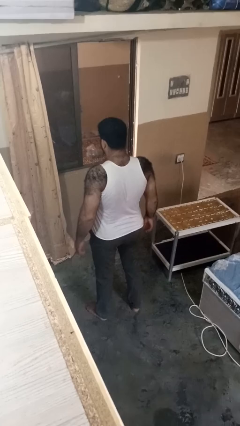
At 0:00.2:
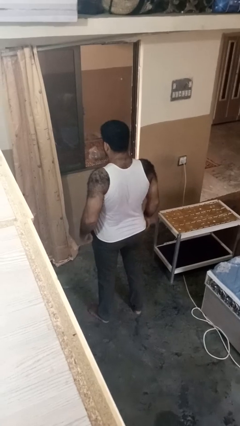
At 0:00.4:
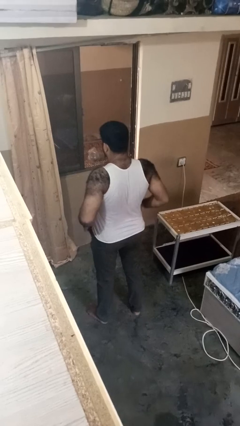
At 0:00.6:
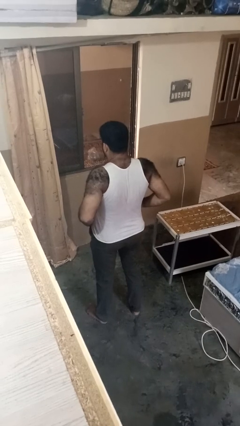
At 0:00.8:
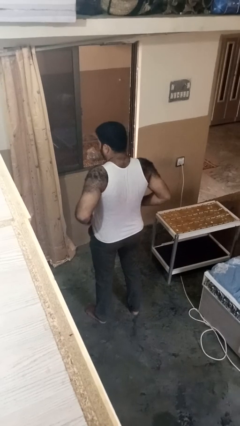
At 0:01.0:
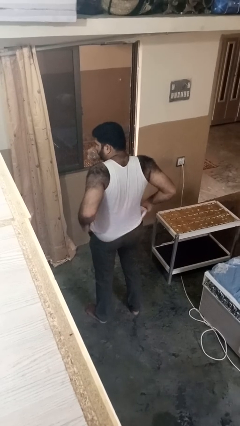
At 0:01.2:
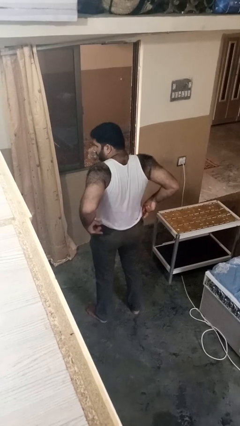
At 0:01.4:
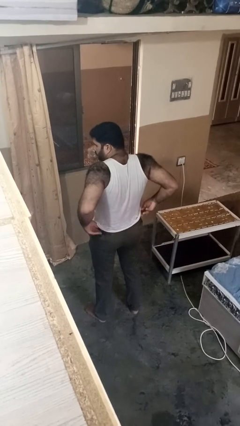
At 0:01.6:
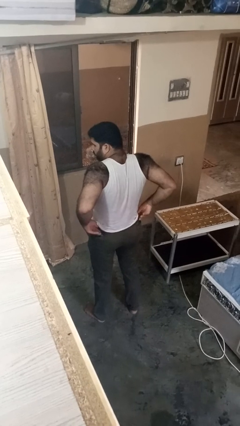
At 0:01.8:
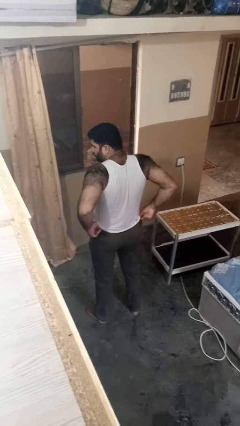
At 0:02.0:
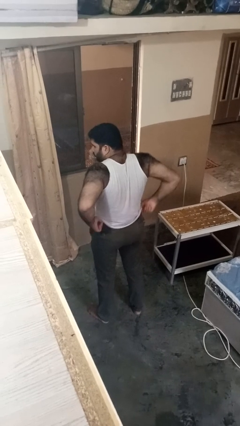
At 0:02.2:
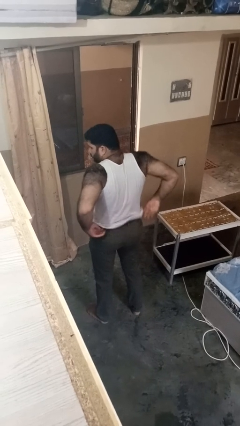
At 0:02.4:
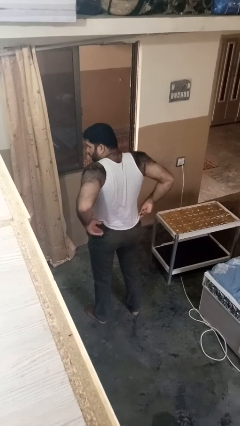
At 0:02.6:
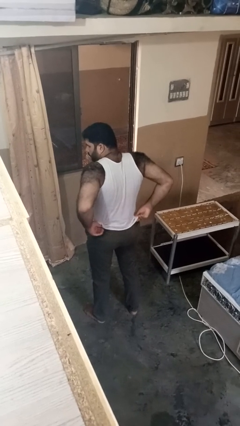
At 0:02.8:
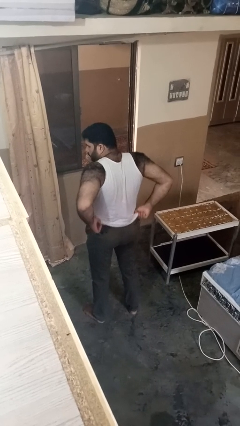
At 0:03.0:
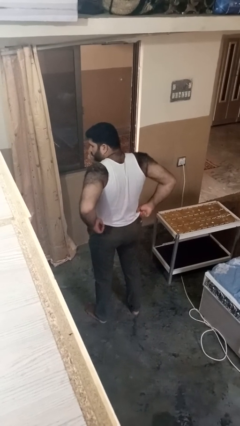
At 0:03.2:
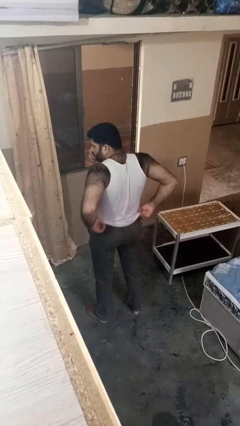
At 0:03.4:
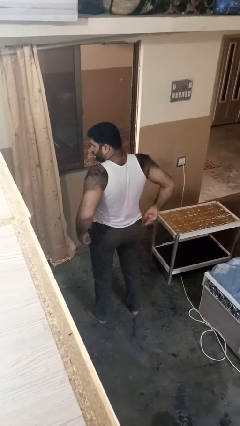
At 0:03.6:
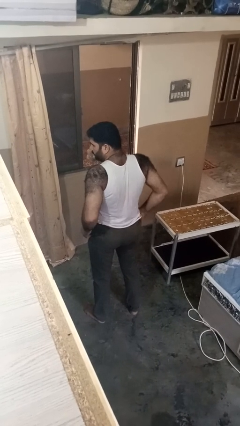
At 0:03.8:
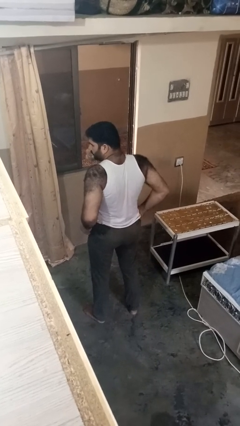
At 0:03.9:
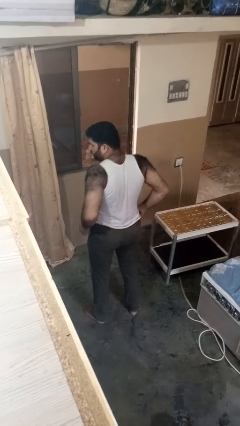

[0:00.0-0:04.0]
person hikes up pants

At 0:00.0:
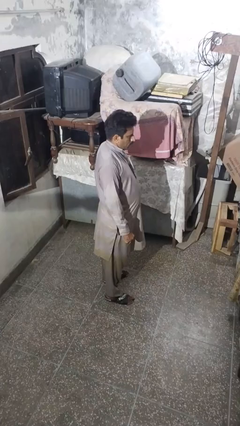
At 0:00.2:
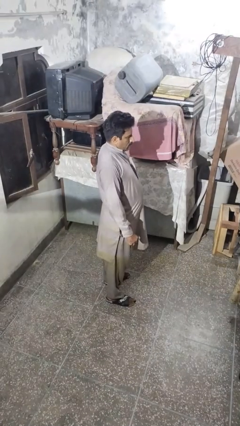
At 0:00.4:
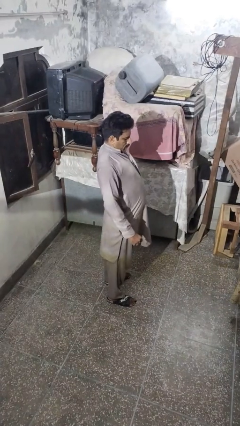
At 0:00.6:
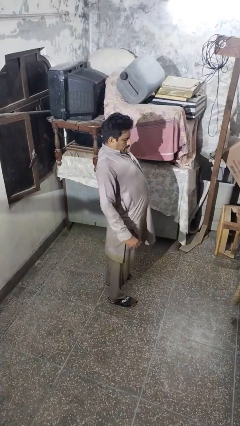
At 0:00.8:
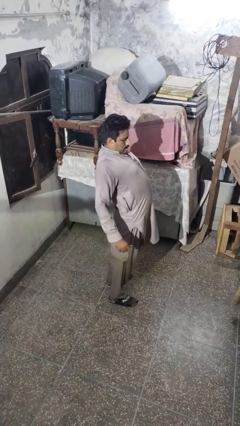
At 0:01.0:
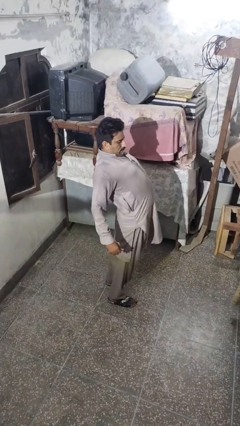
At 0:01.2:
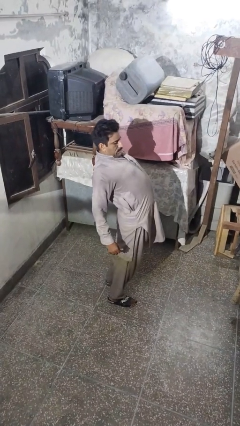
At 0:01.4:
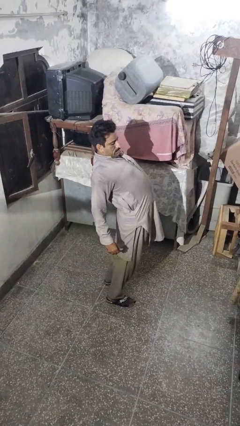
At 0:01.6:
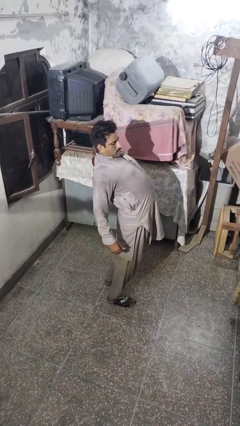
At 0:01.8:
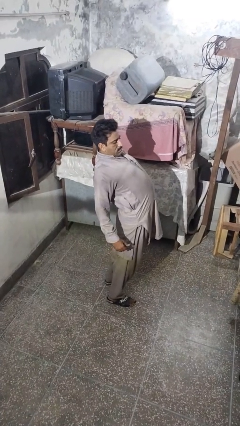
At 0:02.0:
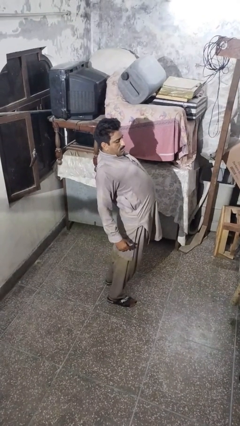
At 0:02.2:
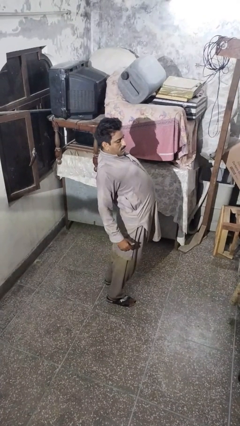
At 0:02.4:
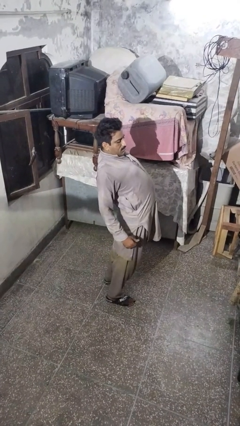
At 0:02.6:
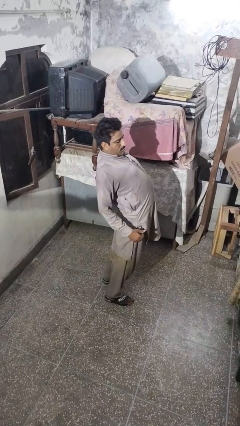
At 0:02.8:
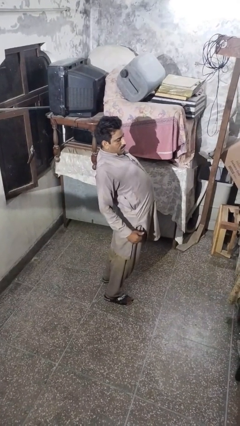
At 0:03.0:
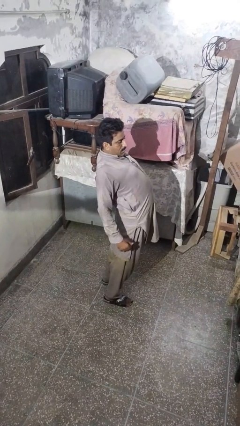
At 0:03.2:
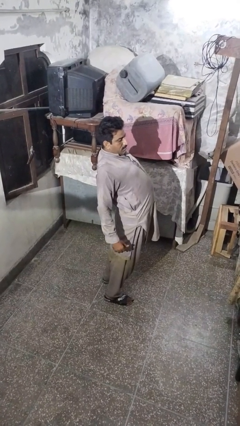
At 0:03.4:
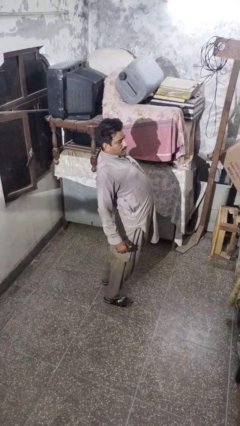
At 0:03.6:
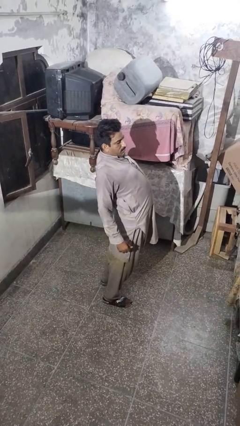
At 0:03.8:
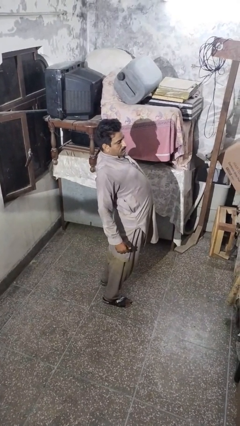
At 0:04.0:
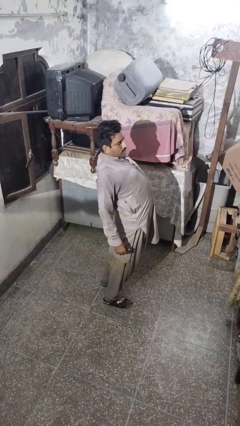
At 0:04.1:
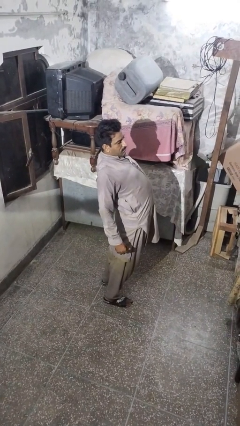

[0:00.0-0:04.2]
person stretches back

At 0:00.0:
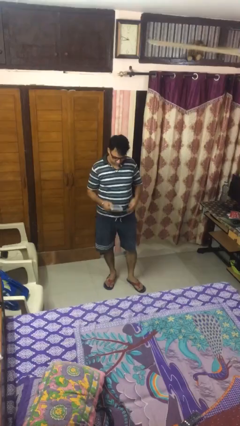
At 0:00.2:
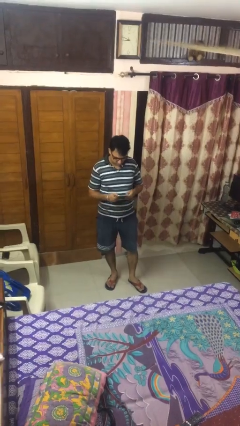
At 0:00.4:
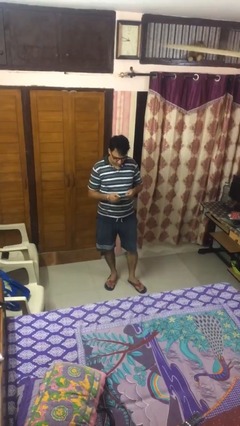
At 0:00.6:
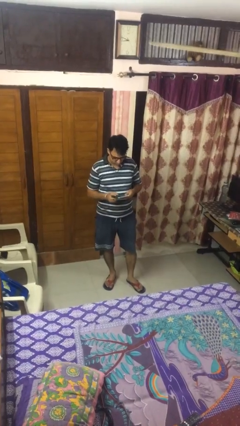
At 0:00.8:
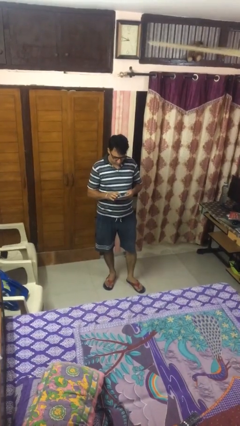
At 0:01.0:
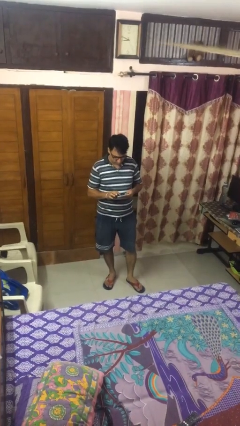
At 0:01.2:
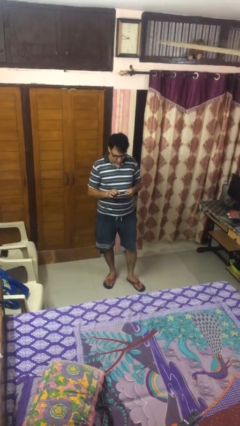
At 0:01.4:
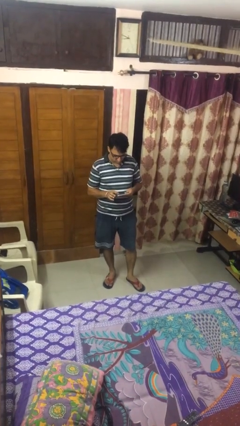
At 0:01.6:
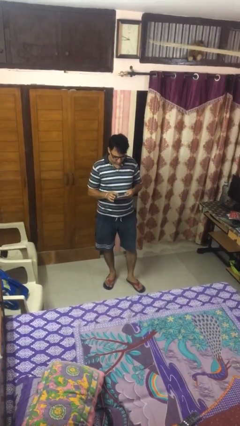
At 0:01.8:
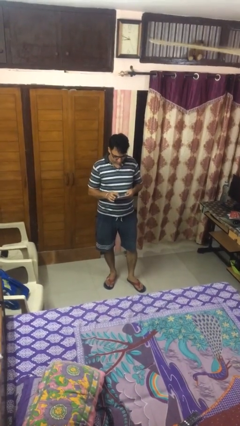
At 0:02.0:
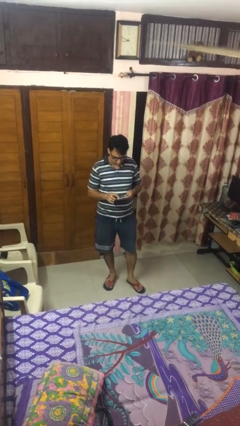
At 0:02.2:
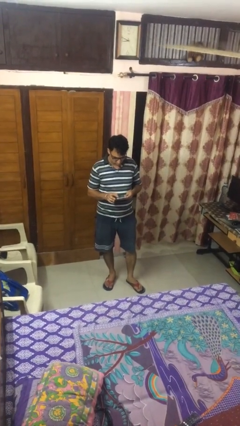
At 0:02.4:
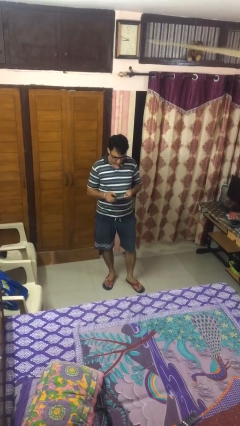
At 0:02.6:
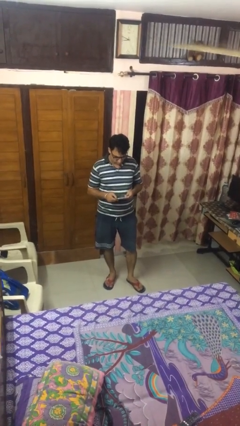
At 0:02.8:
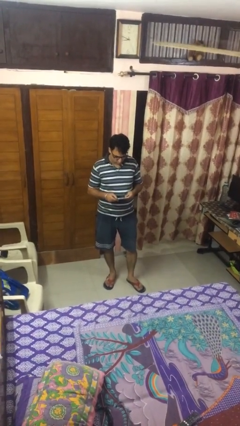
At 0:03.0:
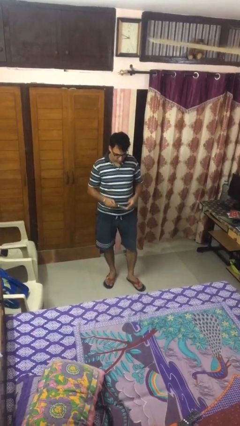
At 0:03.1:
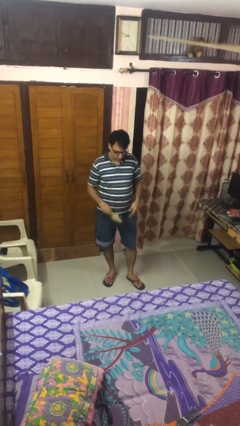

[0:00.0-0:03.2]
person interacts with tablet

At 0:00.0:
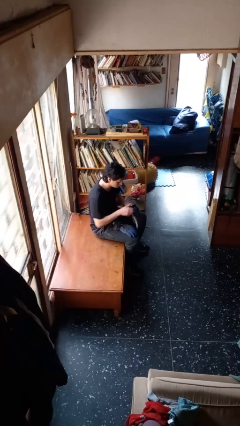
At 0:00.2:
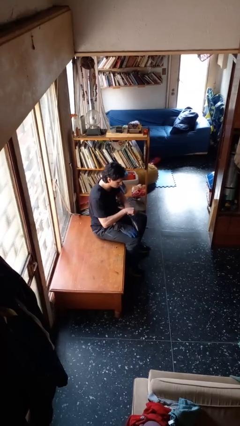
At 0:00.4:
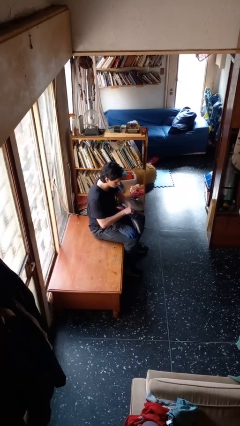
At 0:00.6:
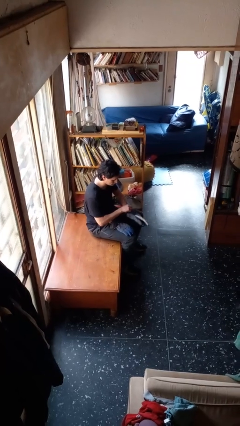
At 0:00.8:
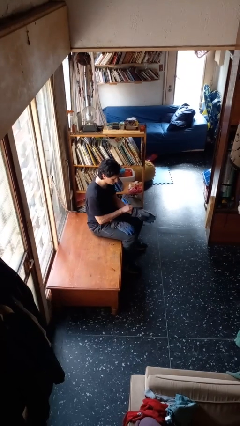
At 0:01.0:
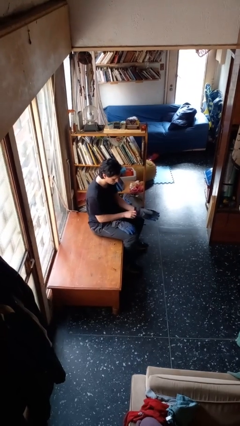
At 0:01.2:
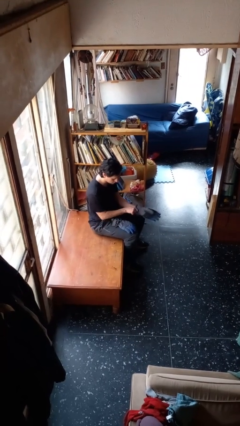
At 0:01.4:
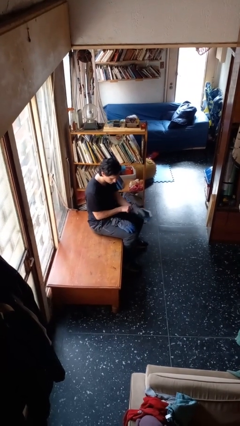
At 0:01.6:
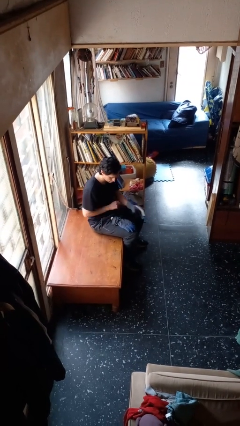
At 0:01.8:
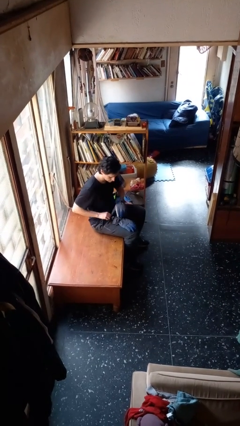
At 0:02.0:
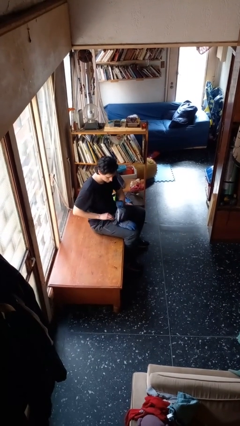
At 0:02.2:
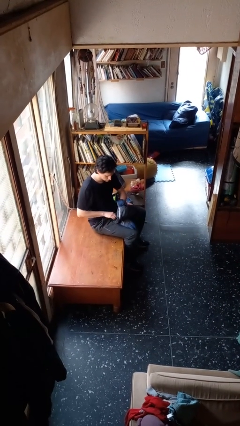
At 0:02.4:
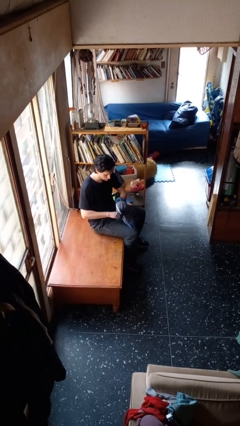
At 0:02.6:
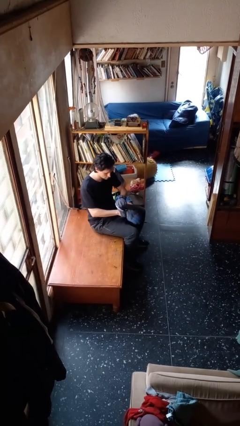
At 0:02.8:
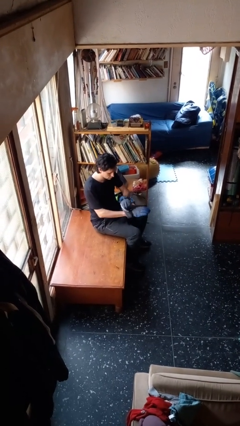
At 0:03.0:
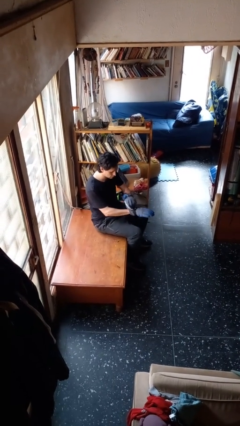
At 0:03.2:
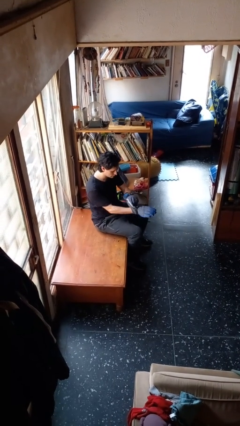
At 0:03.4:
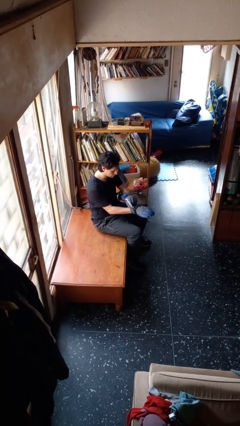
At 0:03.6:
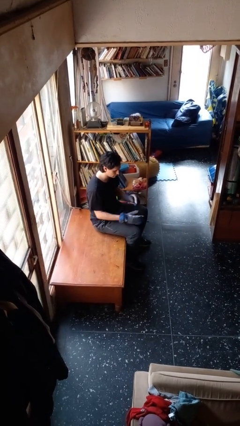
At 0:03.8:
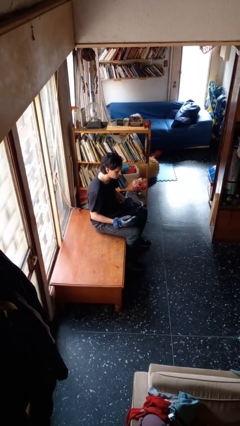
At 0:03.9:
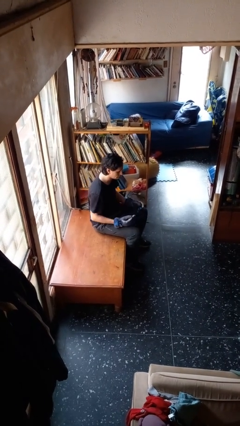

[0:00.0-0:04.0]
person puts on gloves

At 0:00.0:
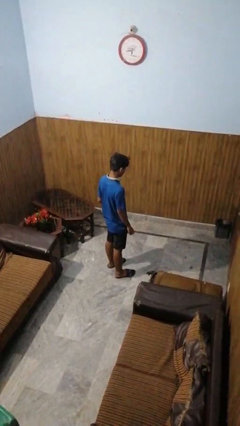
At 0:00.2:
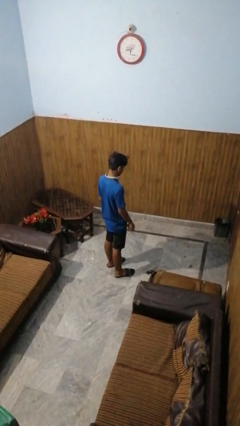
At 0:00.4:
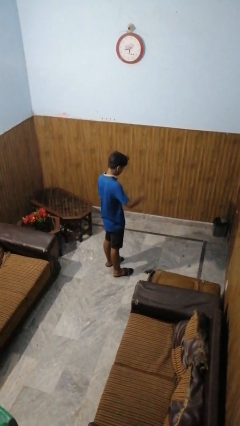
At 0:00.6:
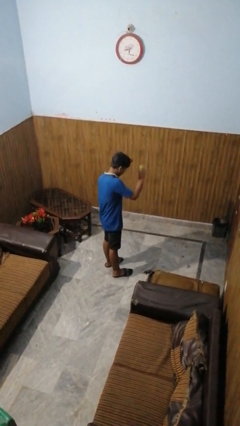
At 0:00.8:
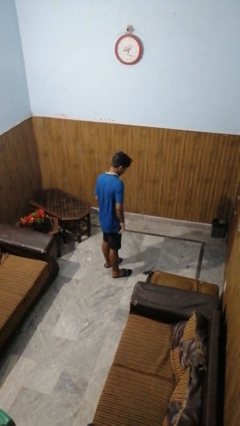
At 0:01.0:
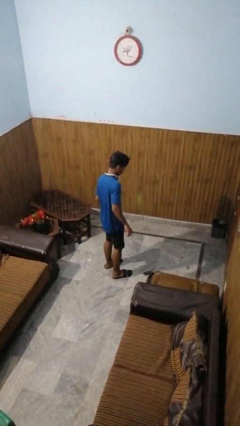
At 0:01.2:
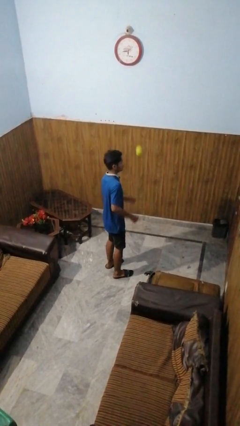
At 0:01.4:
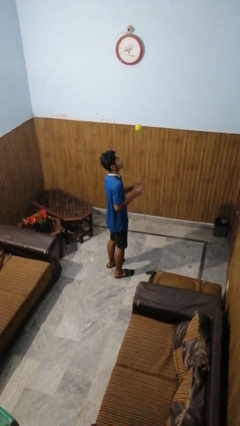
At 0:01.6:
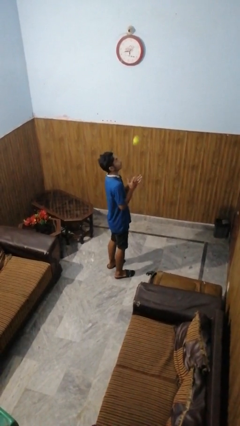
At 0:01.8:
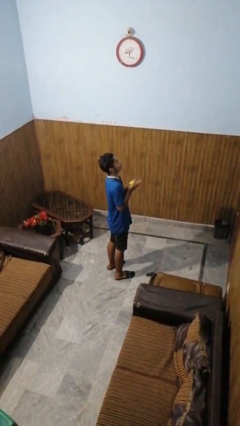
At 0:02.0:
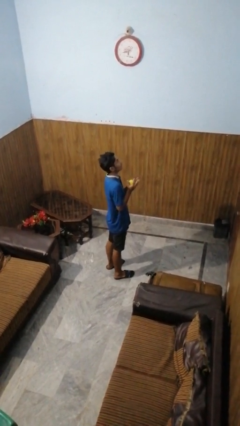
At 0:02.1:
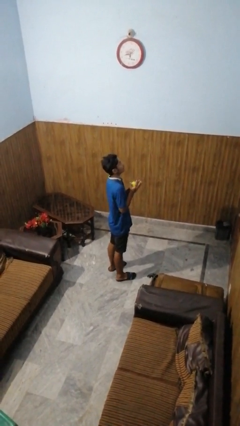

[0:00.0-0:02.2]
person bounces ball on floor
